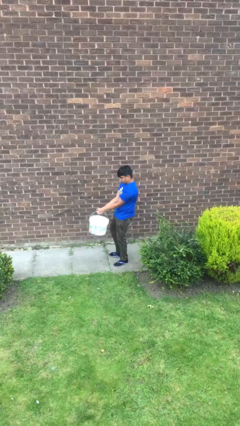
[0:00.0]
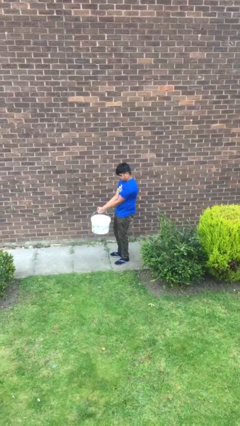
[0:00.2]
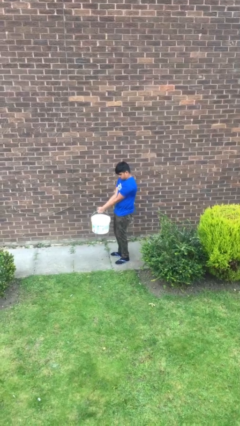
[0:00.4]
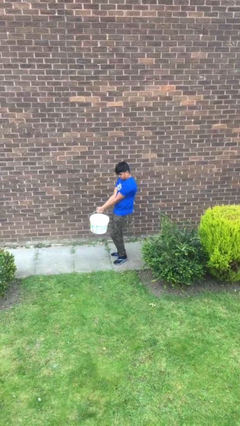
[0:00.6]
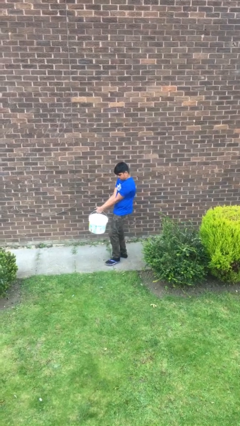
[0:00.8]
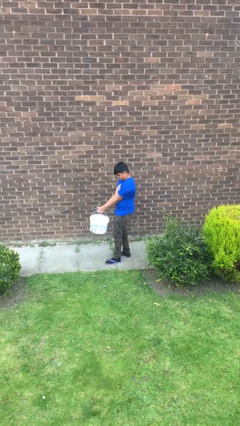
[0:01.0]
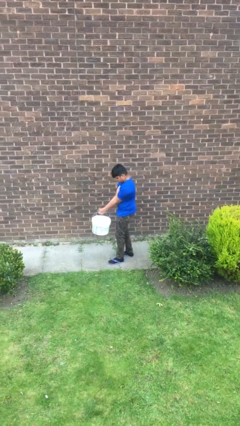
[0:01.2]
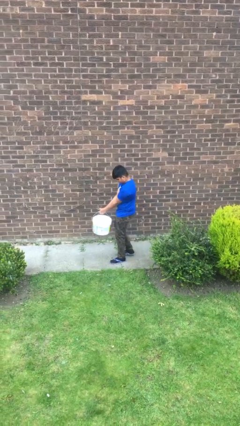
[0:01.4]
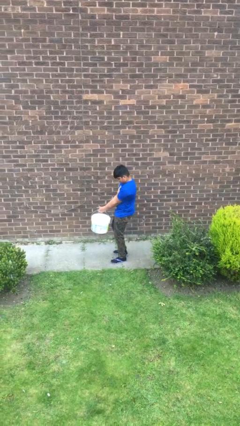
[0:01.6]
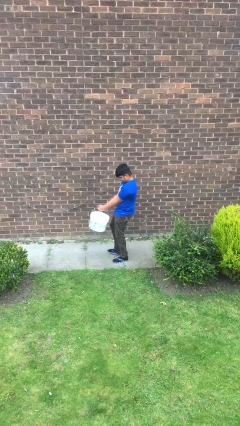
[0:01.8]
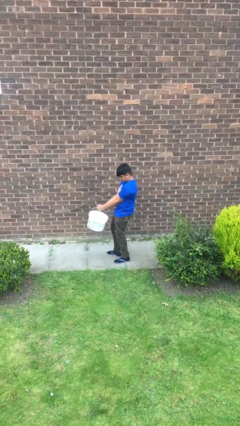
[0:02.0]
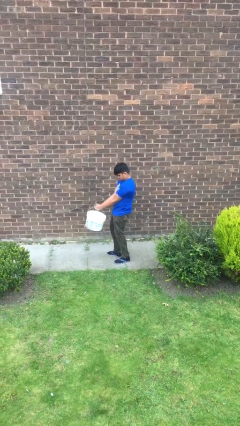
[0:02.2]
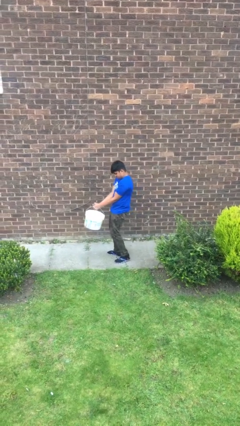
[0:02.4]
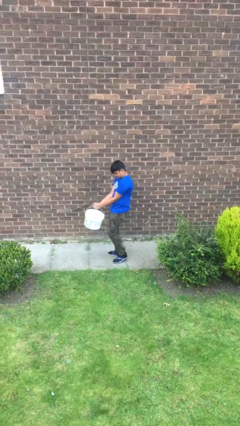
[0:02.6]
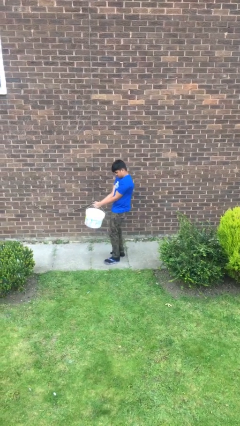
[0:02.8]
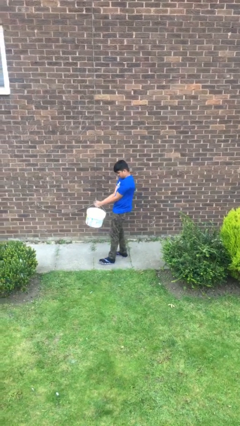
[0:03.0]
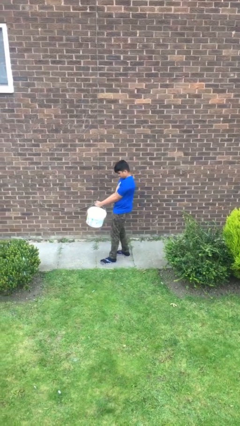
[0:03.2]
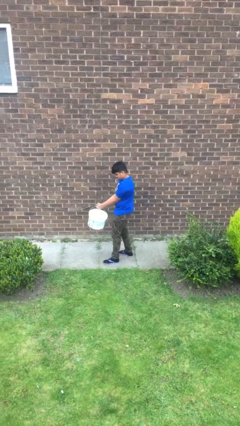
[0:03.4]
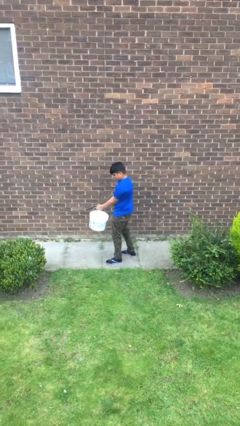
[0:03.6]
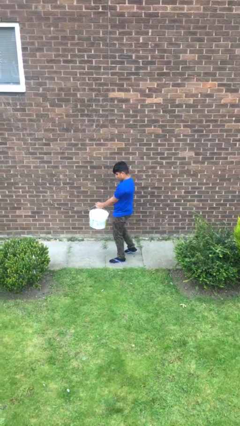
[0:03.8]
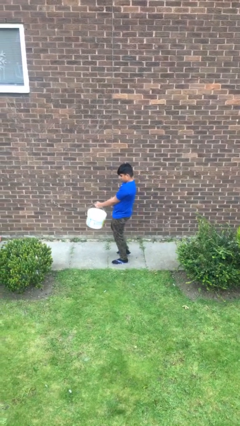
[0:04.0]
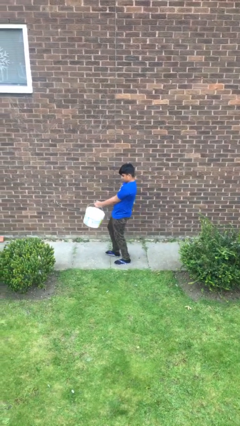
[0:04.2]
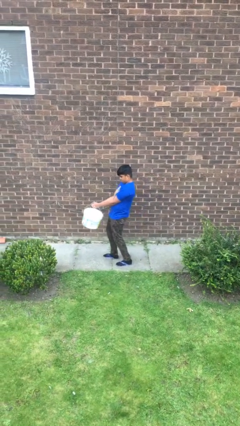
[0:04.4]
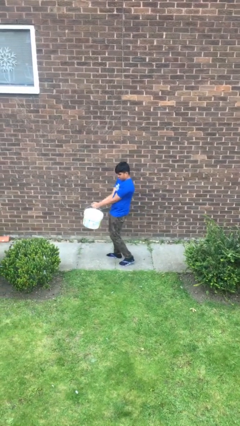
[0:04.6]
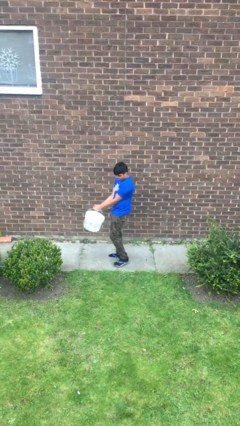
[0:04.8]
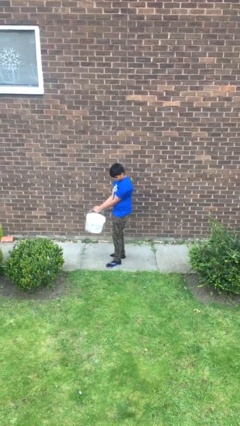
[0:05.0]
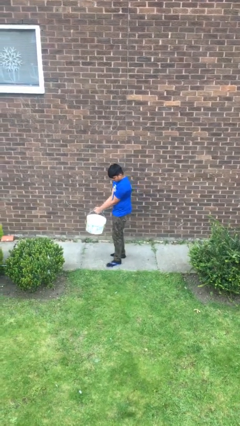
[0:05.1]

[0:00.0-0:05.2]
person carries heavy object

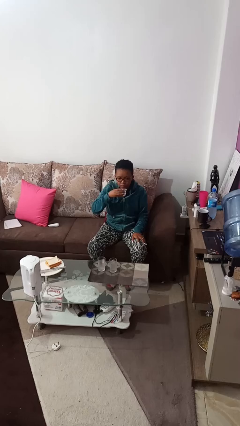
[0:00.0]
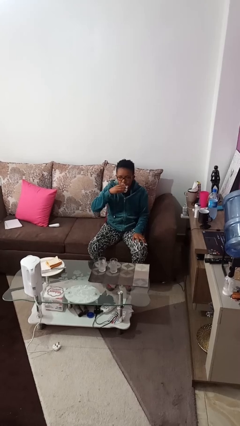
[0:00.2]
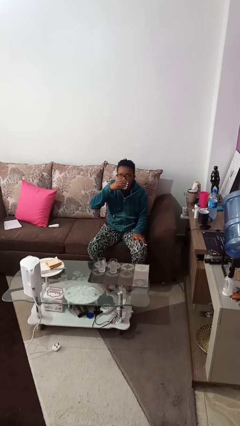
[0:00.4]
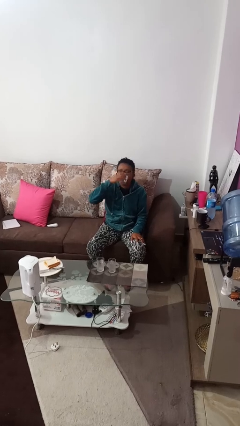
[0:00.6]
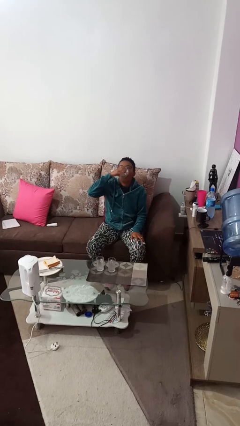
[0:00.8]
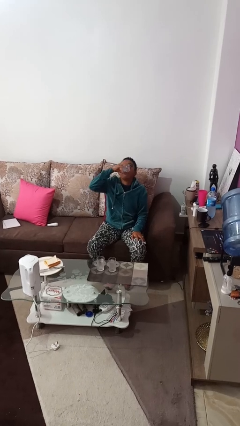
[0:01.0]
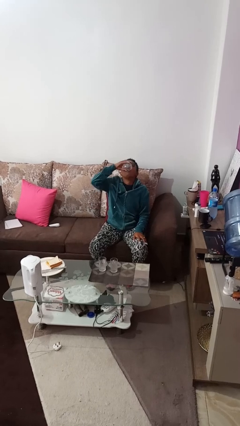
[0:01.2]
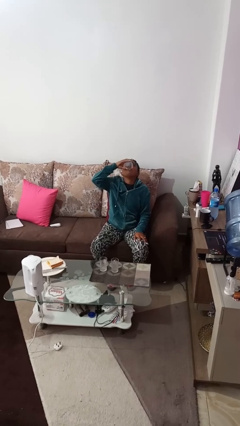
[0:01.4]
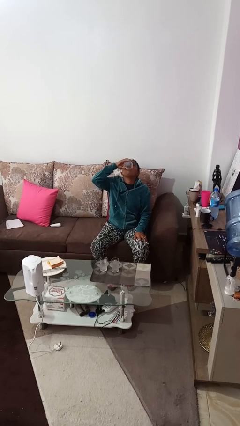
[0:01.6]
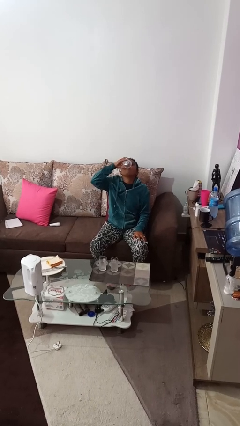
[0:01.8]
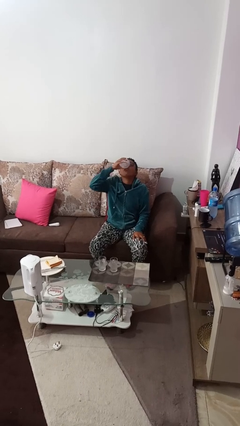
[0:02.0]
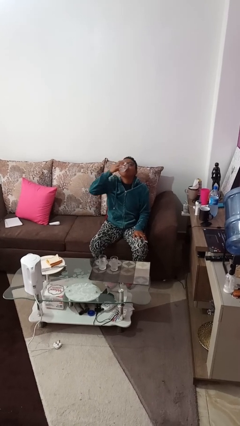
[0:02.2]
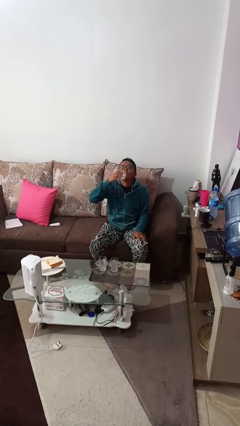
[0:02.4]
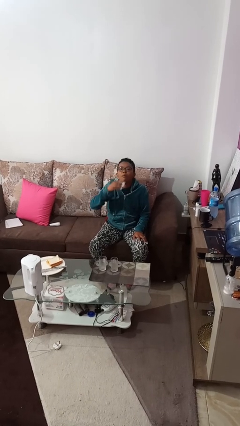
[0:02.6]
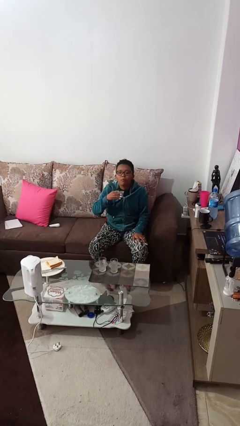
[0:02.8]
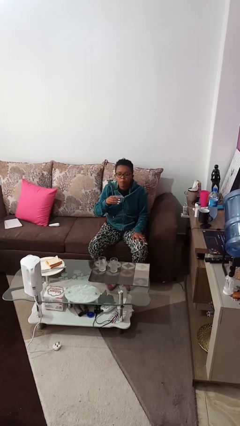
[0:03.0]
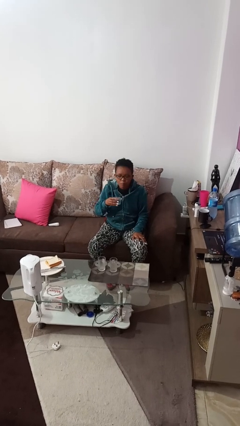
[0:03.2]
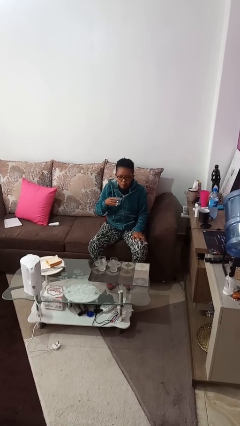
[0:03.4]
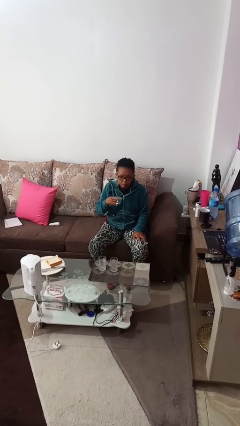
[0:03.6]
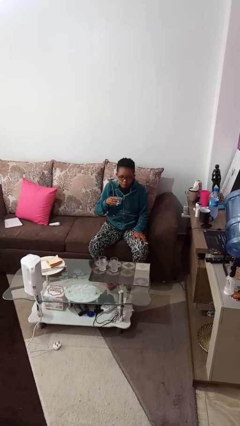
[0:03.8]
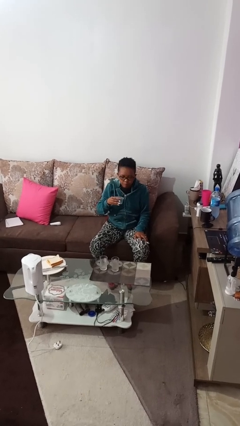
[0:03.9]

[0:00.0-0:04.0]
person drinks from shotglass

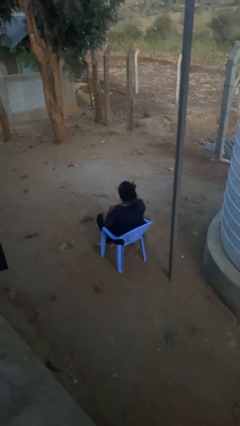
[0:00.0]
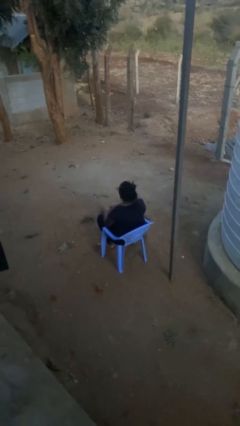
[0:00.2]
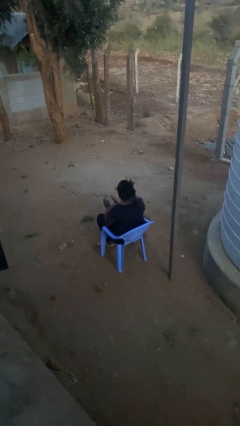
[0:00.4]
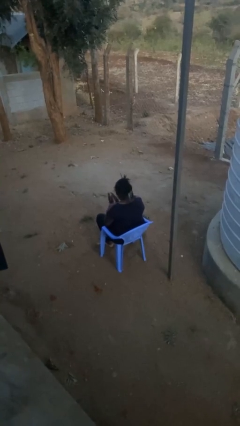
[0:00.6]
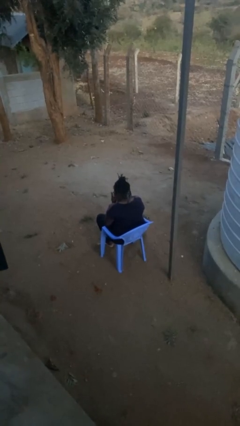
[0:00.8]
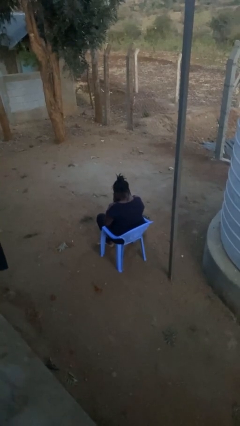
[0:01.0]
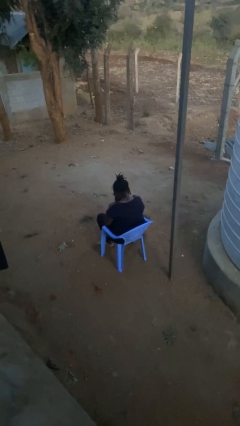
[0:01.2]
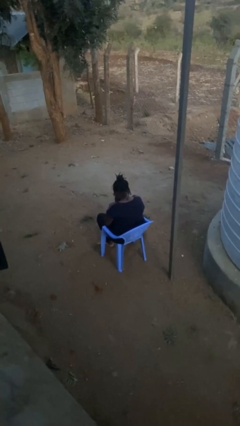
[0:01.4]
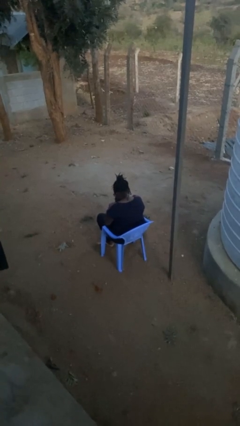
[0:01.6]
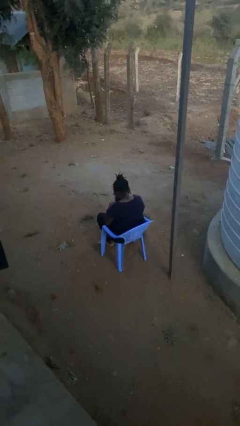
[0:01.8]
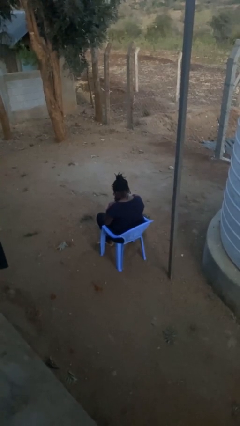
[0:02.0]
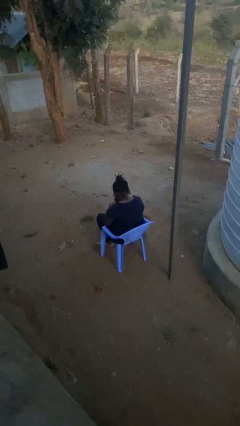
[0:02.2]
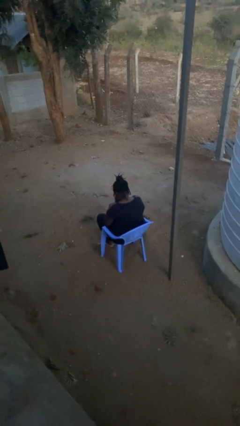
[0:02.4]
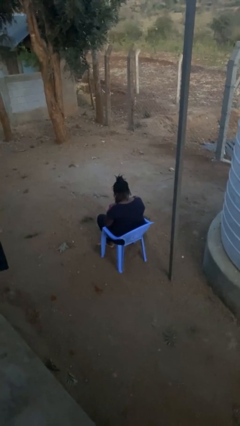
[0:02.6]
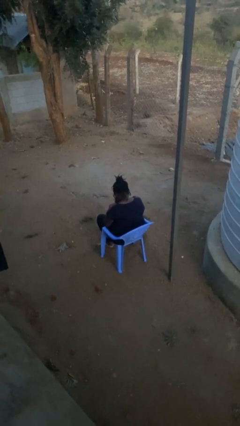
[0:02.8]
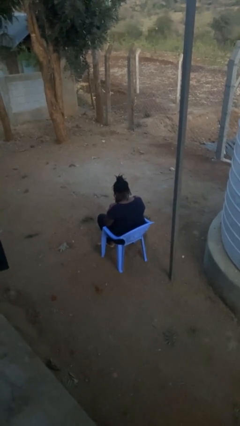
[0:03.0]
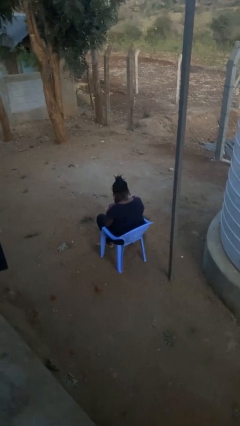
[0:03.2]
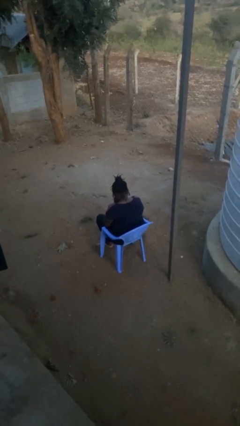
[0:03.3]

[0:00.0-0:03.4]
person prays

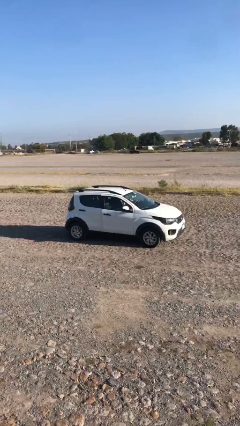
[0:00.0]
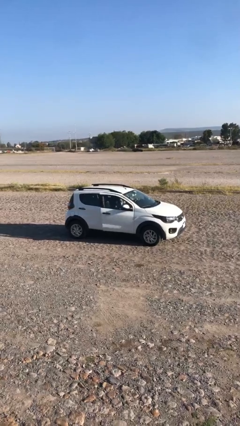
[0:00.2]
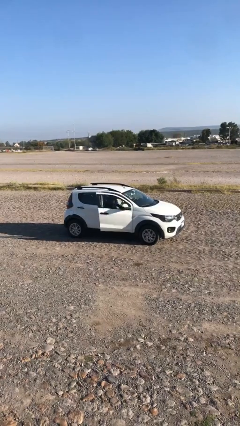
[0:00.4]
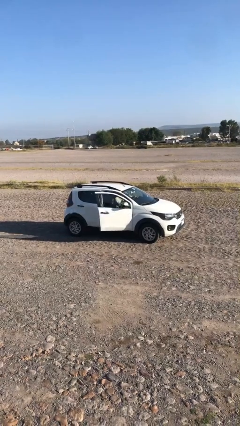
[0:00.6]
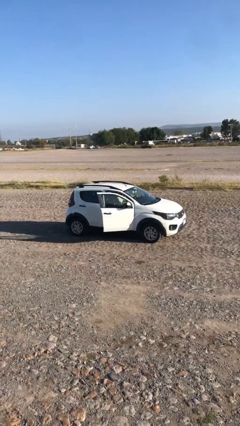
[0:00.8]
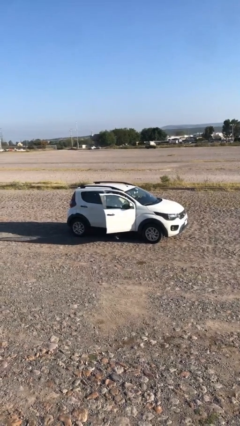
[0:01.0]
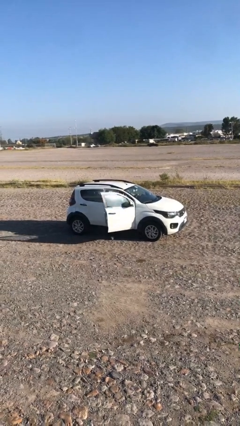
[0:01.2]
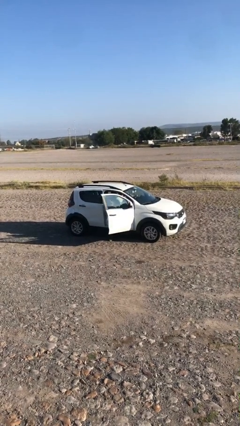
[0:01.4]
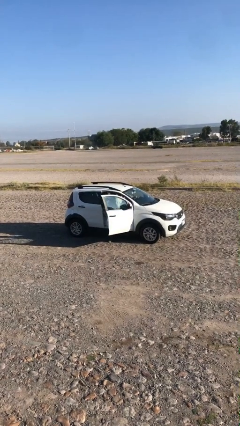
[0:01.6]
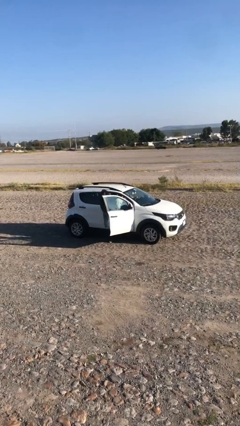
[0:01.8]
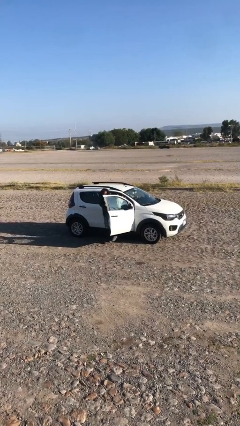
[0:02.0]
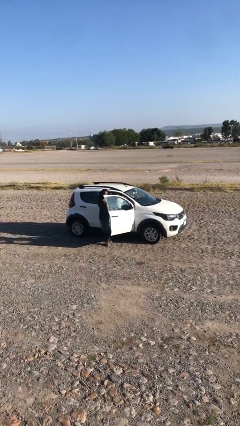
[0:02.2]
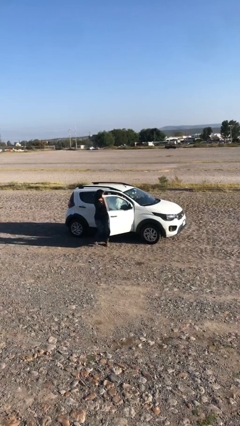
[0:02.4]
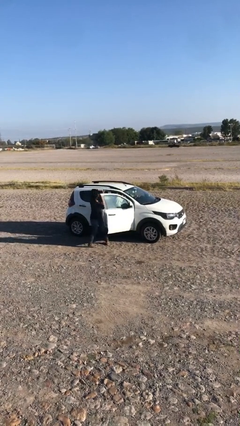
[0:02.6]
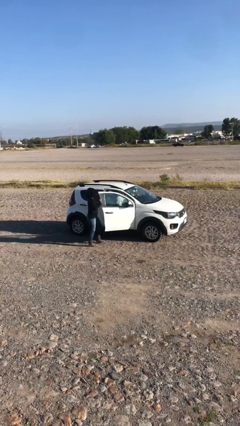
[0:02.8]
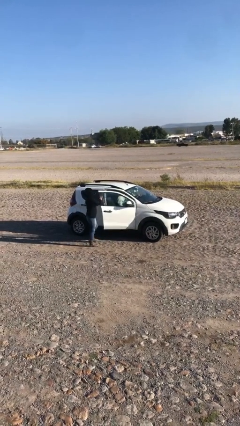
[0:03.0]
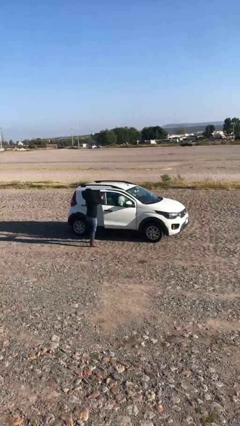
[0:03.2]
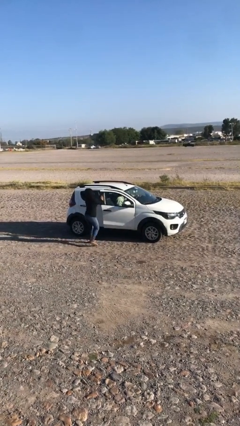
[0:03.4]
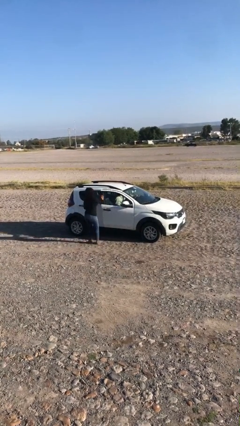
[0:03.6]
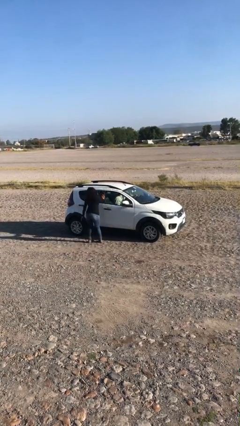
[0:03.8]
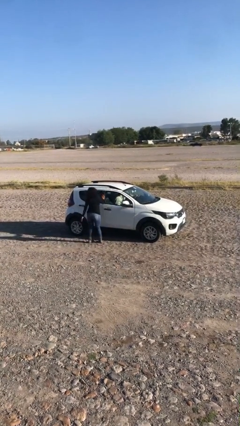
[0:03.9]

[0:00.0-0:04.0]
car drops off person

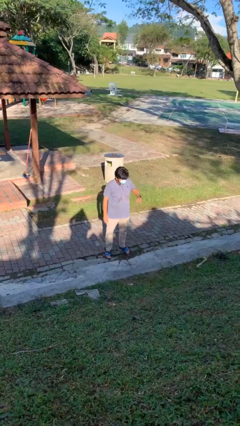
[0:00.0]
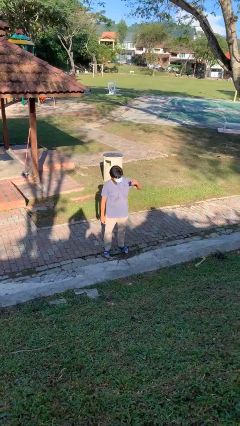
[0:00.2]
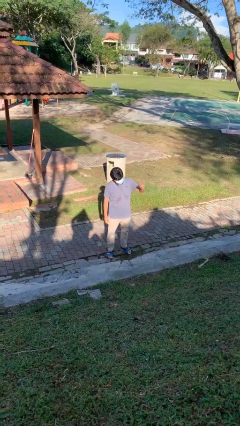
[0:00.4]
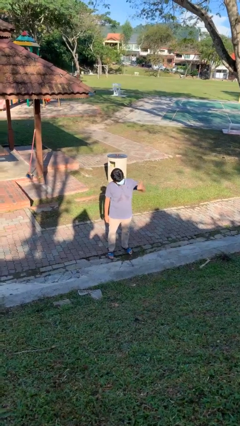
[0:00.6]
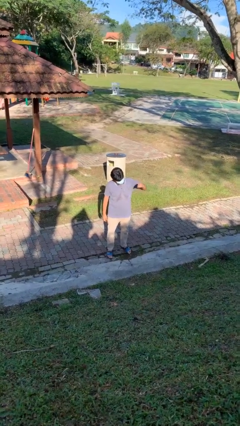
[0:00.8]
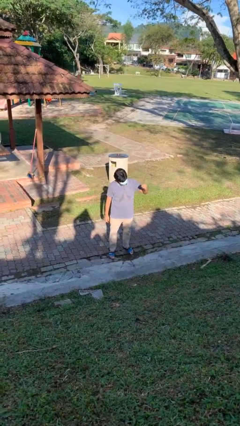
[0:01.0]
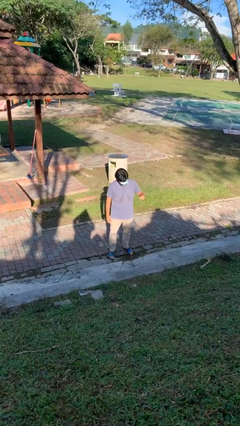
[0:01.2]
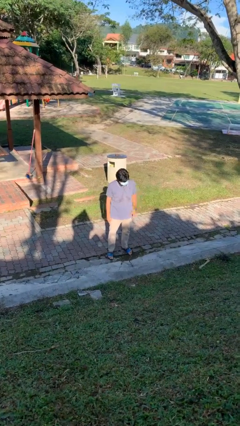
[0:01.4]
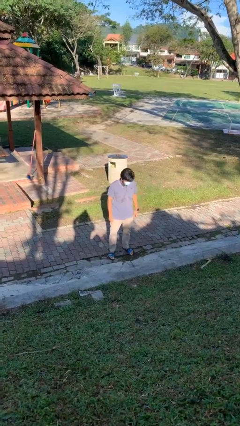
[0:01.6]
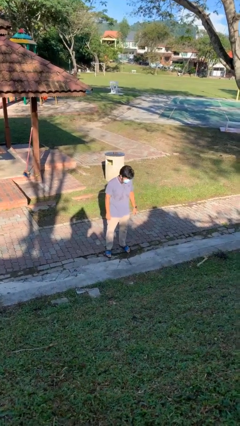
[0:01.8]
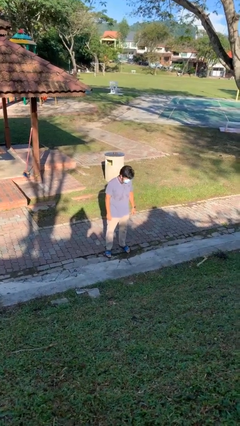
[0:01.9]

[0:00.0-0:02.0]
person snaps fingers
